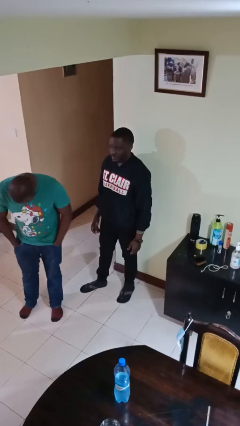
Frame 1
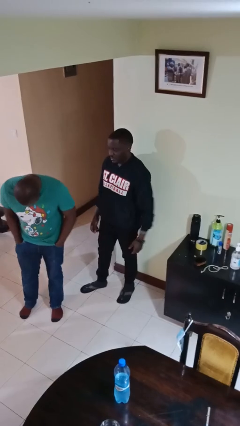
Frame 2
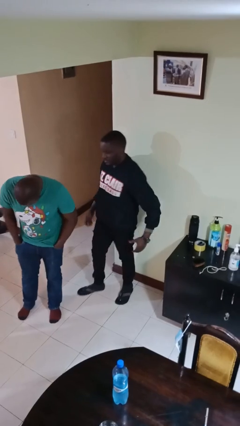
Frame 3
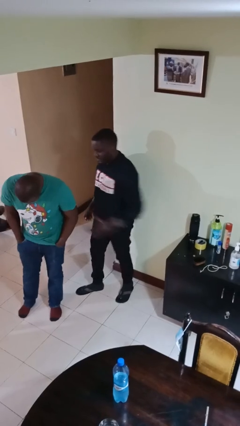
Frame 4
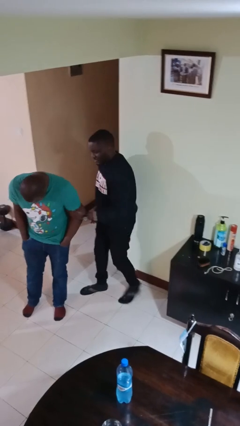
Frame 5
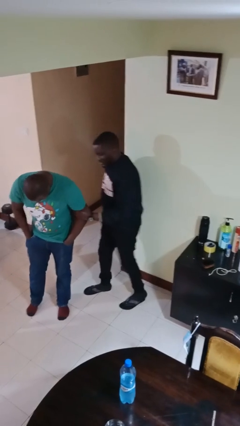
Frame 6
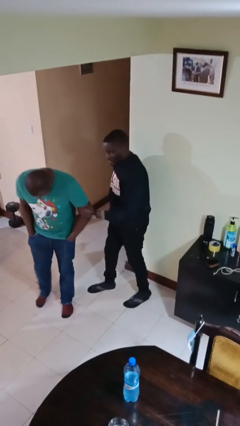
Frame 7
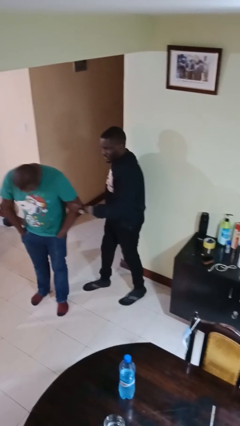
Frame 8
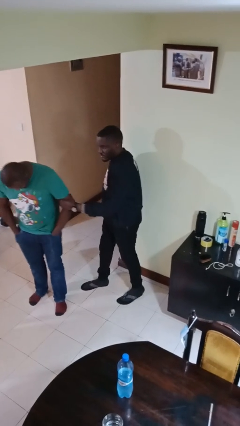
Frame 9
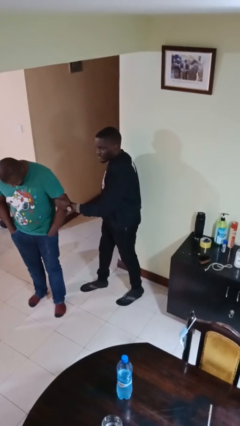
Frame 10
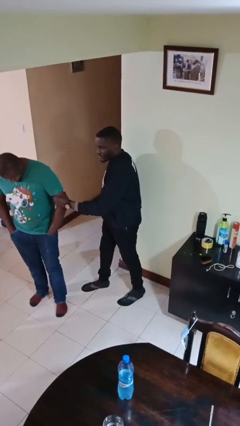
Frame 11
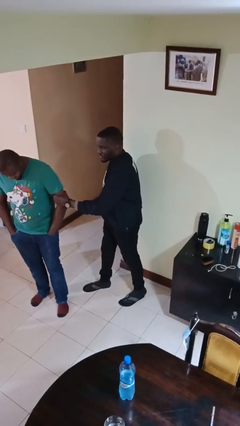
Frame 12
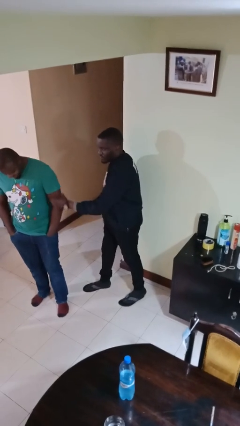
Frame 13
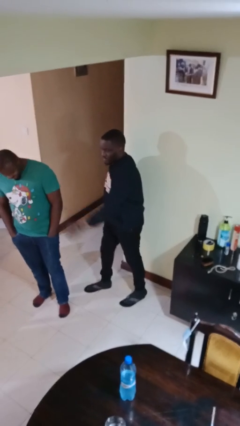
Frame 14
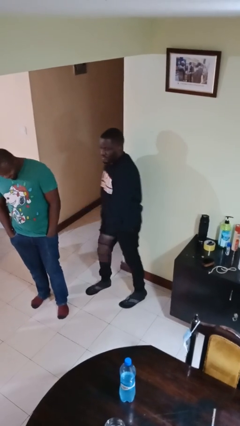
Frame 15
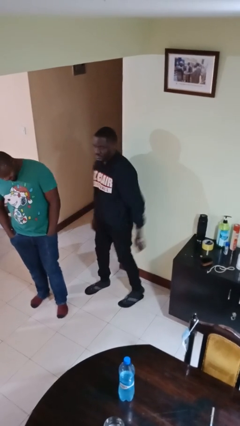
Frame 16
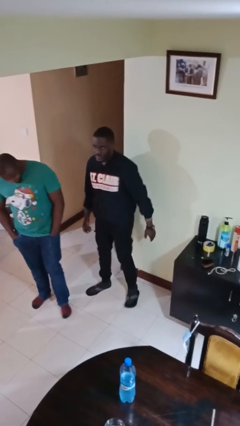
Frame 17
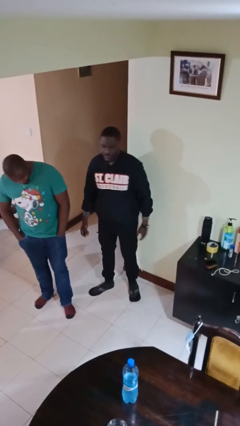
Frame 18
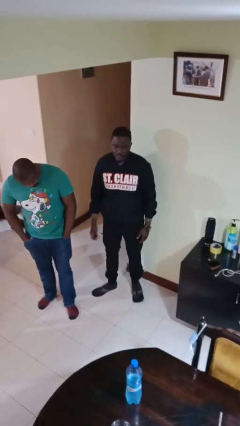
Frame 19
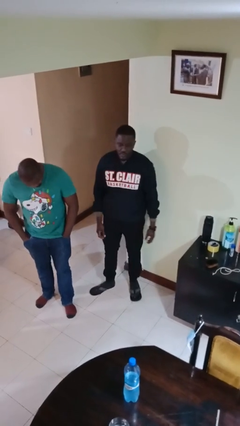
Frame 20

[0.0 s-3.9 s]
person grabs person by bicep

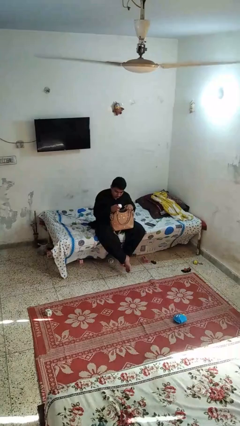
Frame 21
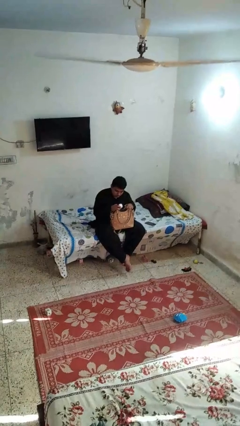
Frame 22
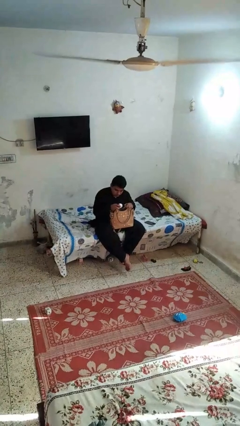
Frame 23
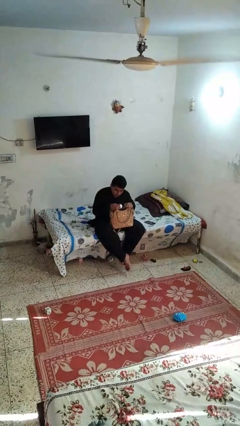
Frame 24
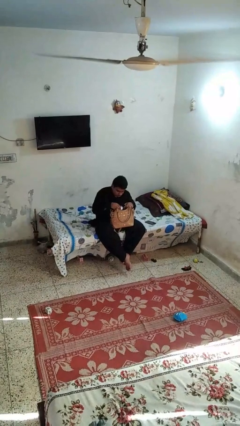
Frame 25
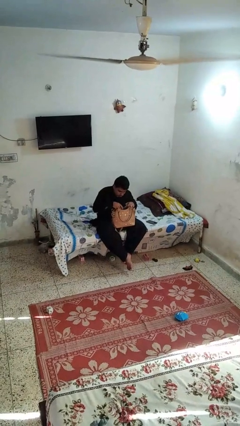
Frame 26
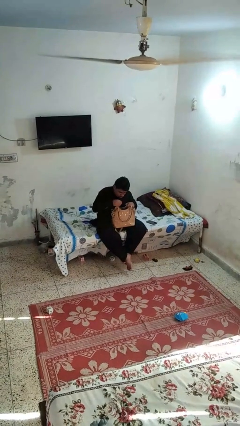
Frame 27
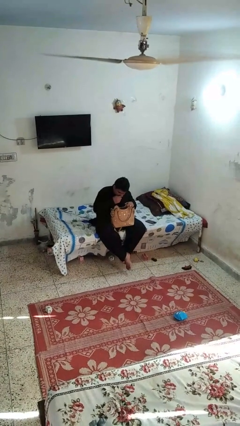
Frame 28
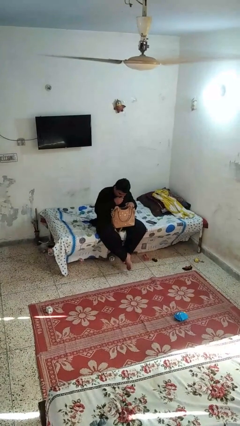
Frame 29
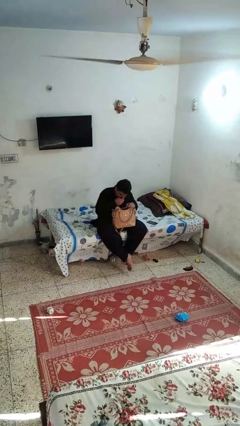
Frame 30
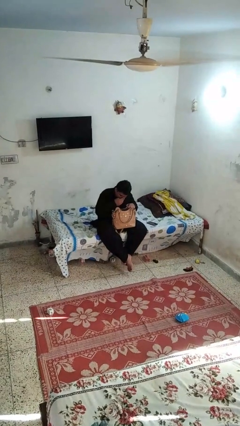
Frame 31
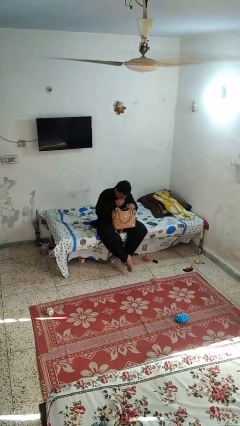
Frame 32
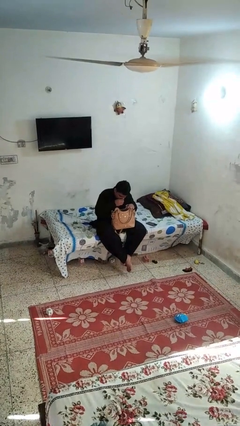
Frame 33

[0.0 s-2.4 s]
person puts object into purse

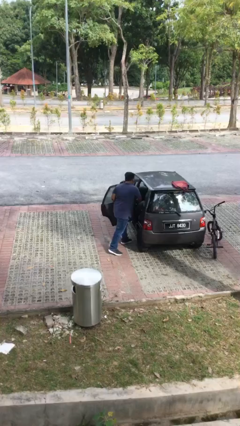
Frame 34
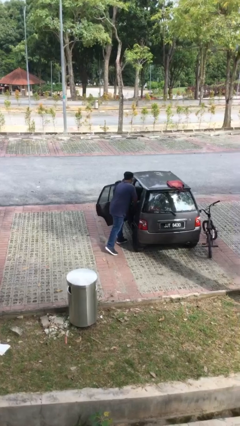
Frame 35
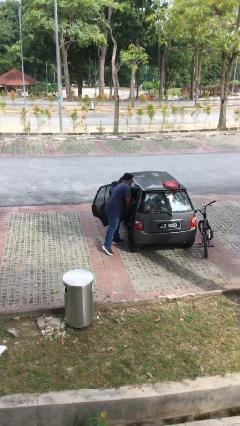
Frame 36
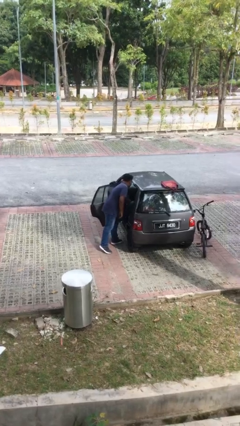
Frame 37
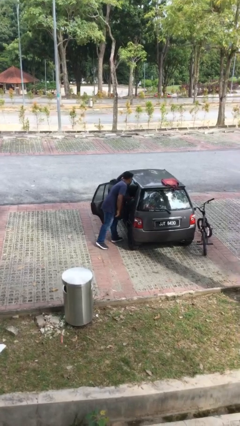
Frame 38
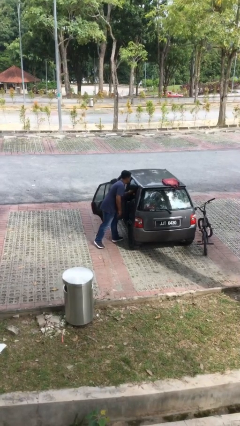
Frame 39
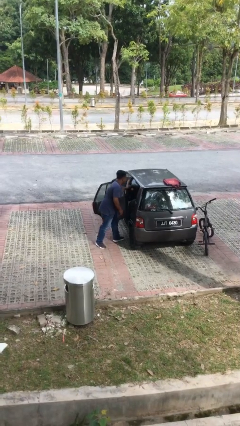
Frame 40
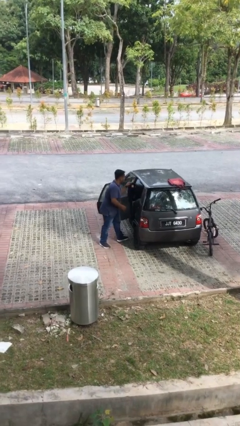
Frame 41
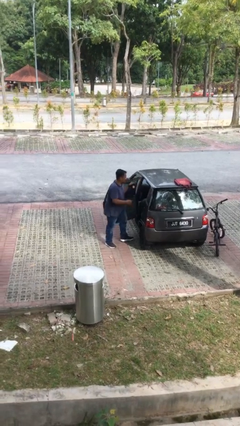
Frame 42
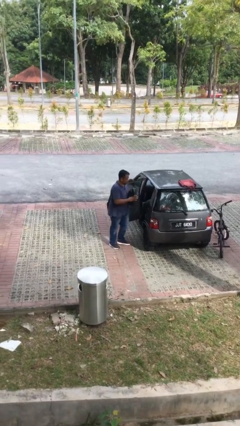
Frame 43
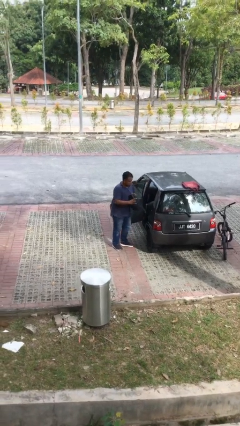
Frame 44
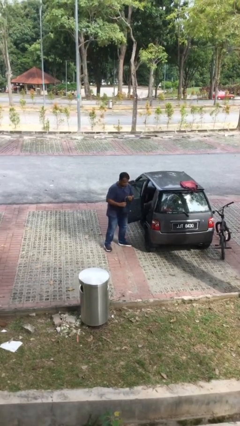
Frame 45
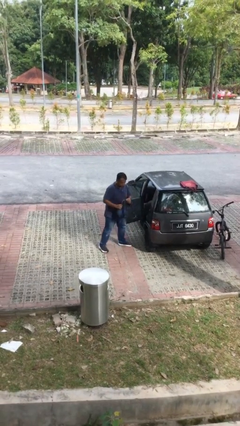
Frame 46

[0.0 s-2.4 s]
person unloads car

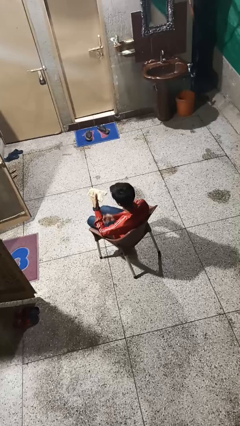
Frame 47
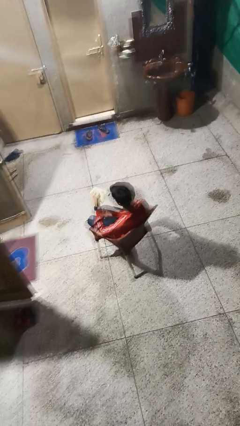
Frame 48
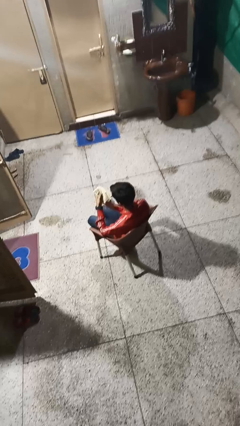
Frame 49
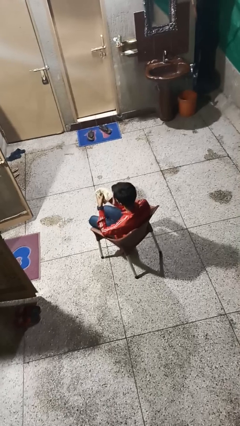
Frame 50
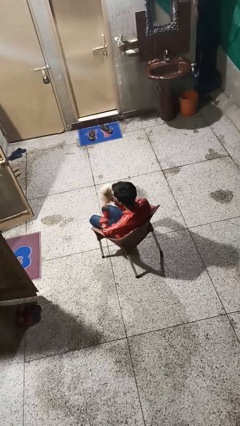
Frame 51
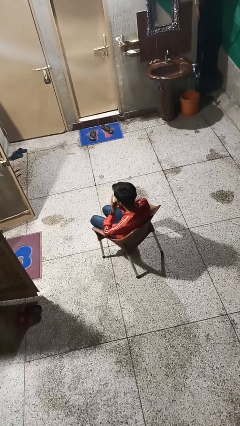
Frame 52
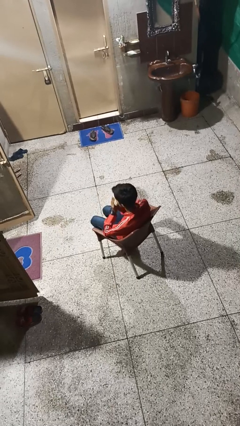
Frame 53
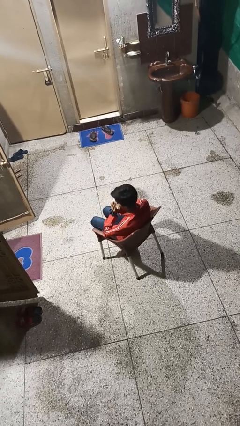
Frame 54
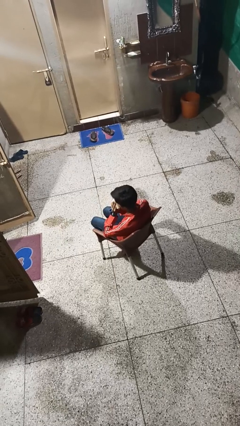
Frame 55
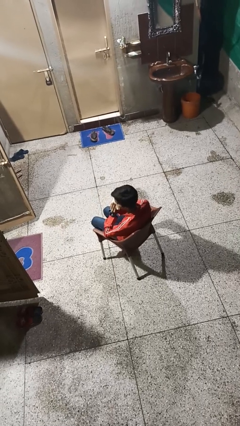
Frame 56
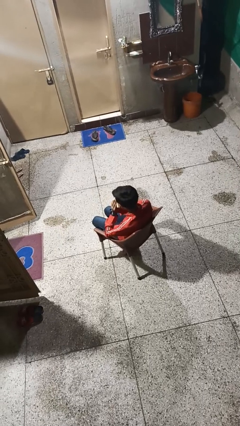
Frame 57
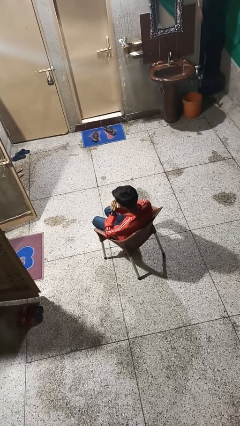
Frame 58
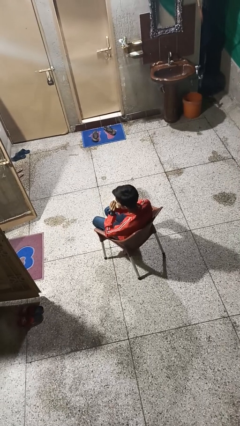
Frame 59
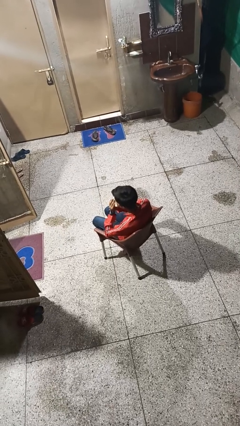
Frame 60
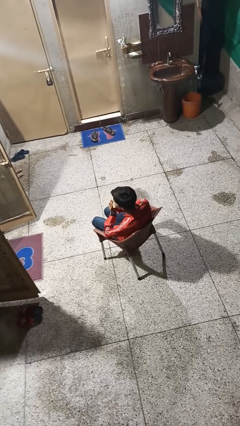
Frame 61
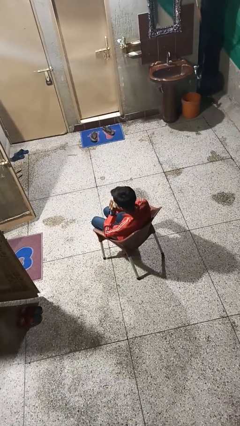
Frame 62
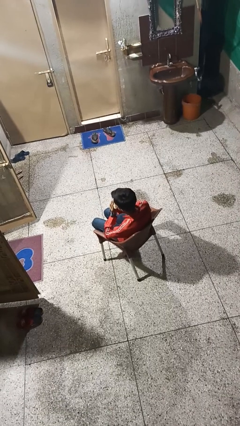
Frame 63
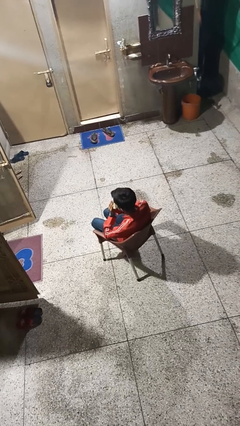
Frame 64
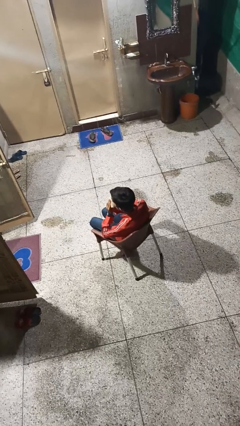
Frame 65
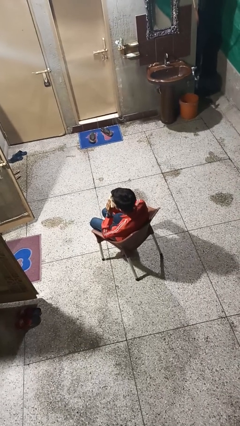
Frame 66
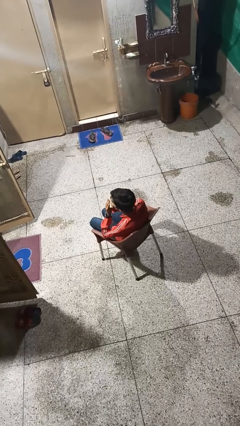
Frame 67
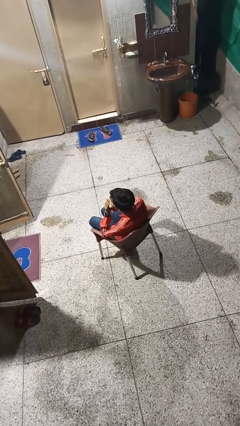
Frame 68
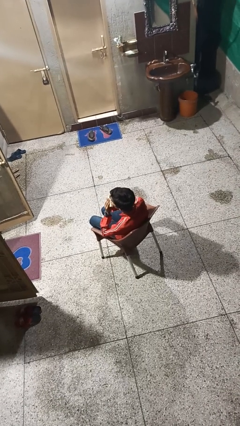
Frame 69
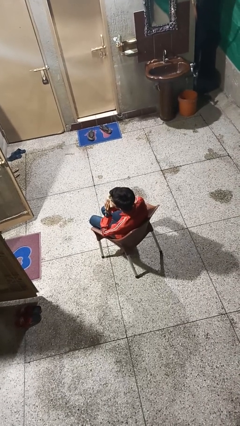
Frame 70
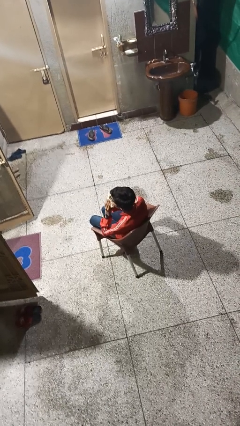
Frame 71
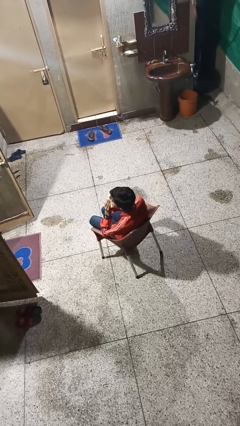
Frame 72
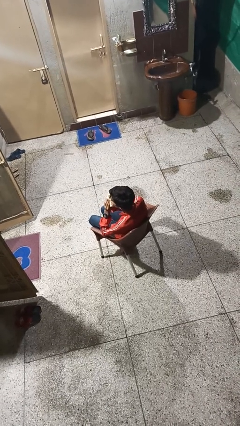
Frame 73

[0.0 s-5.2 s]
person blows nose

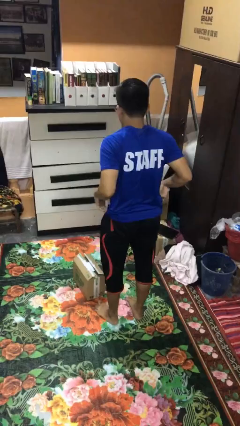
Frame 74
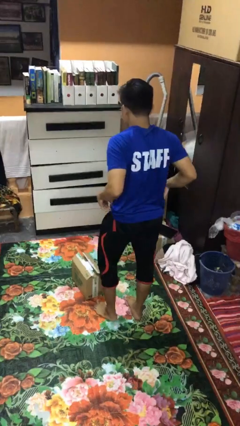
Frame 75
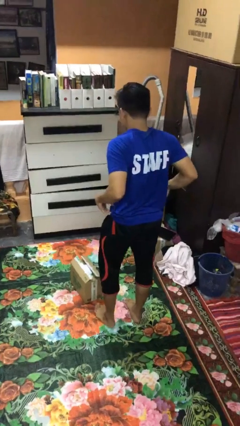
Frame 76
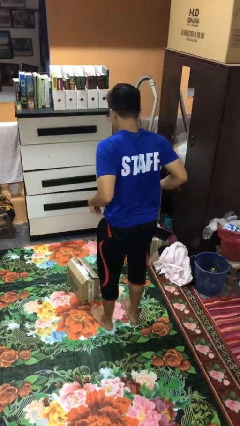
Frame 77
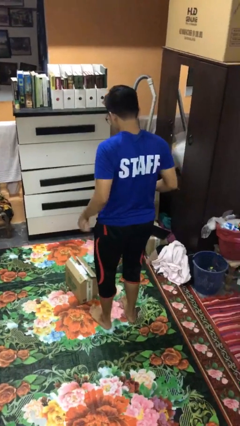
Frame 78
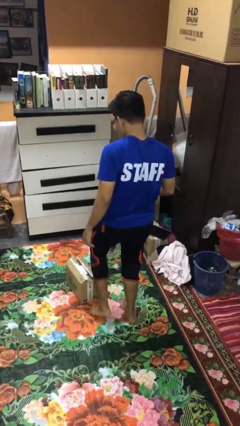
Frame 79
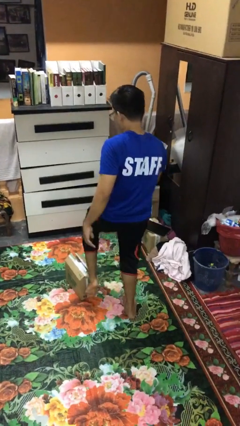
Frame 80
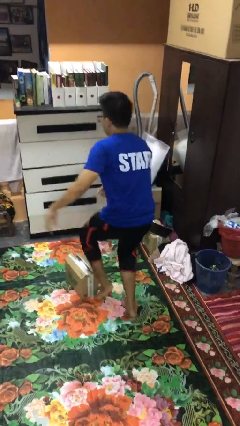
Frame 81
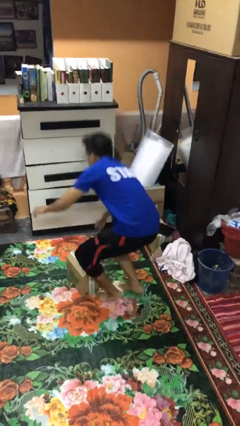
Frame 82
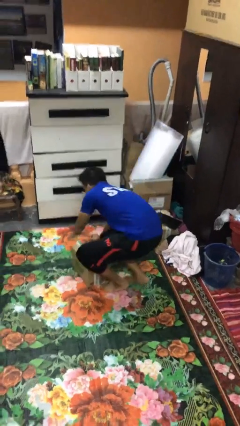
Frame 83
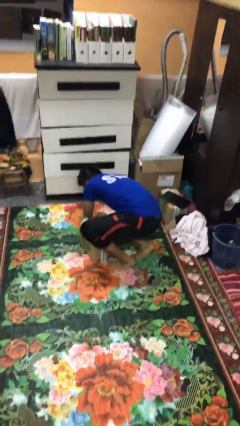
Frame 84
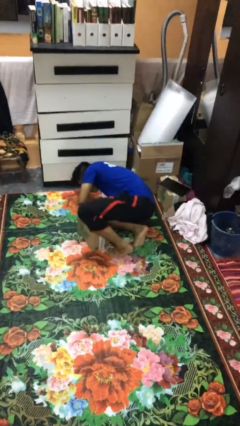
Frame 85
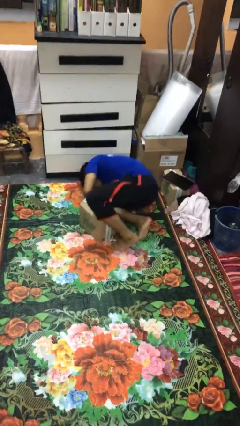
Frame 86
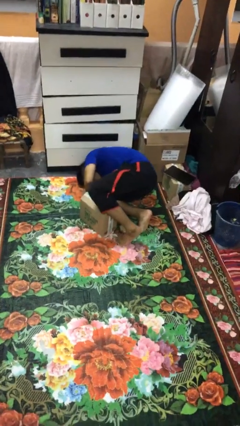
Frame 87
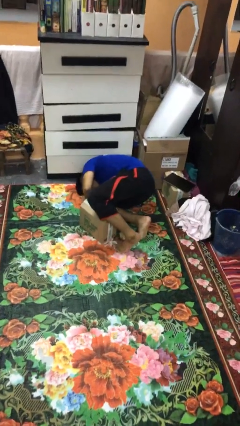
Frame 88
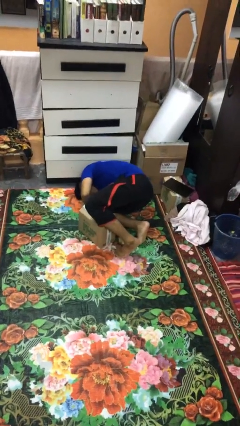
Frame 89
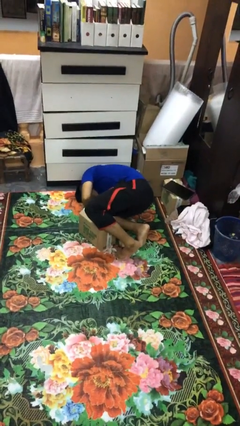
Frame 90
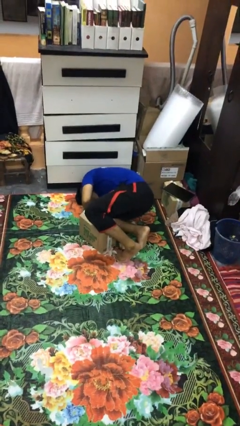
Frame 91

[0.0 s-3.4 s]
person trips on object on floor
